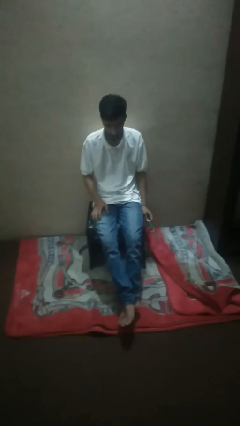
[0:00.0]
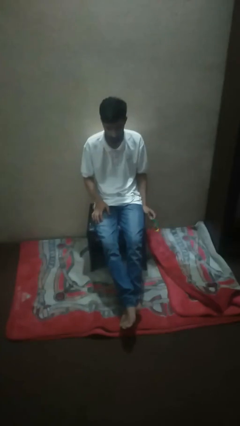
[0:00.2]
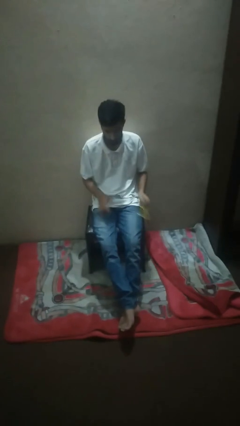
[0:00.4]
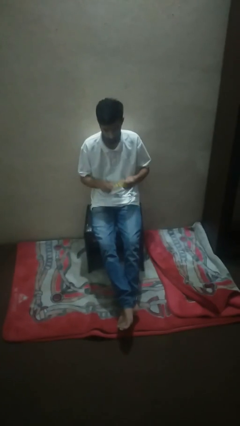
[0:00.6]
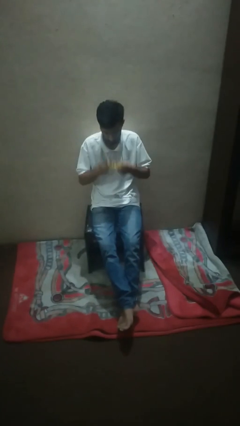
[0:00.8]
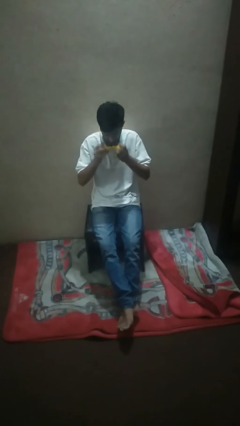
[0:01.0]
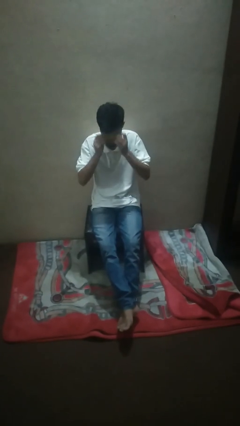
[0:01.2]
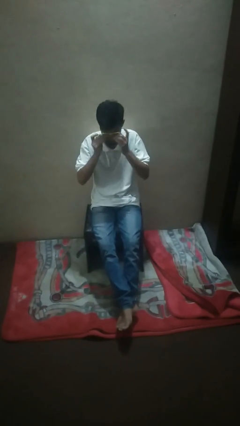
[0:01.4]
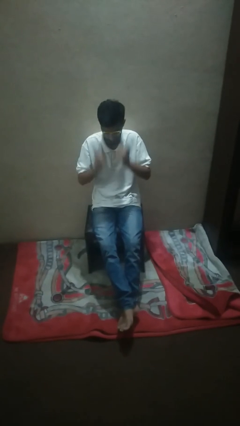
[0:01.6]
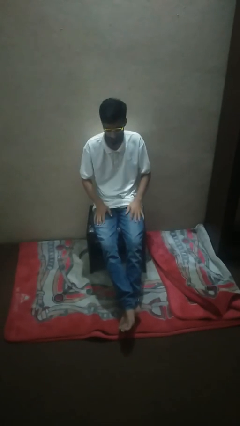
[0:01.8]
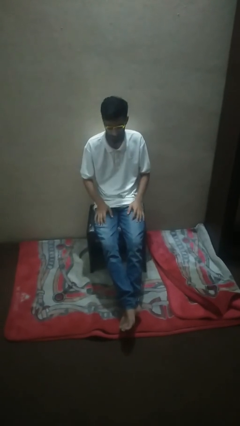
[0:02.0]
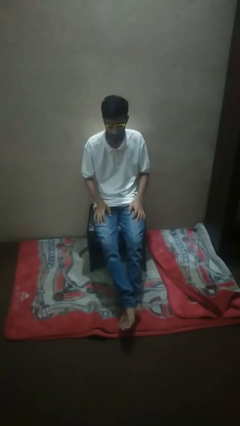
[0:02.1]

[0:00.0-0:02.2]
person puts on sunglasses

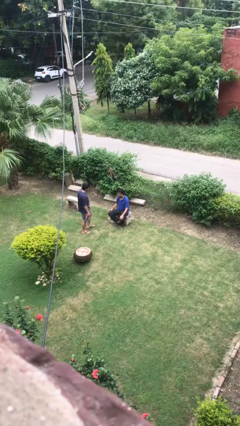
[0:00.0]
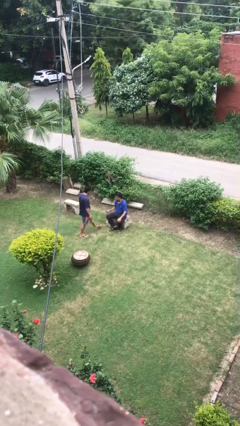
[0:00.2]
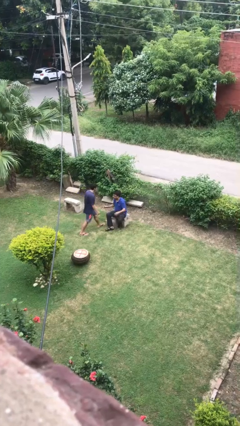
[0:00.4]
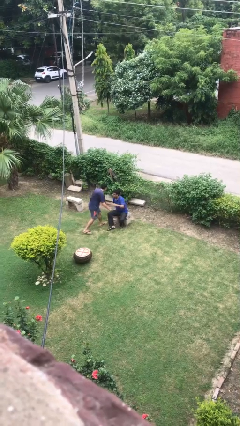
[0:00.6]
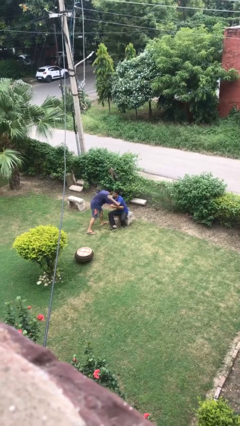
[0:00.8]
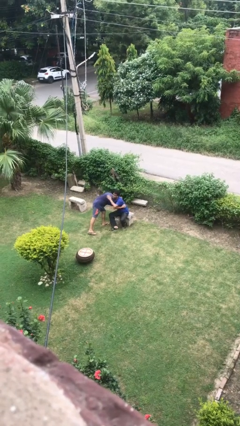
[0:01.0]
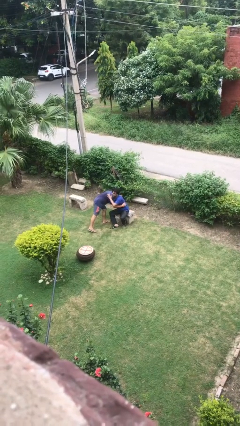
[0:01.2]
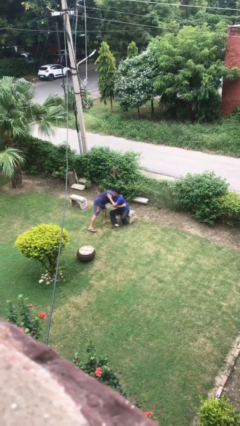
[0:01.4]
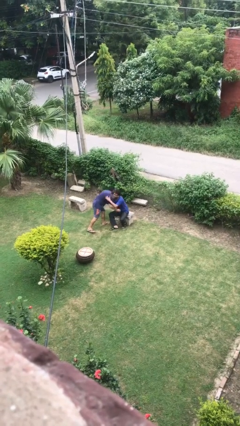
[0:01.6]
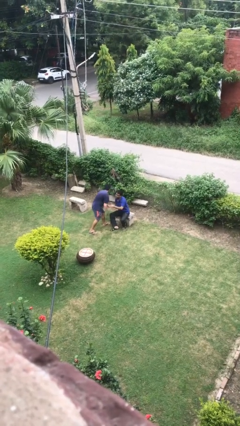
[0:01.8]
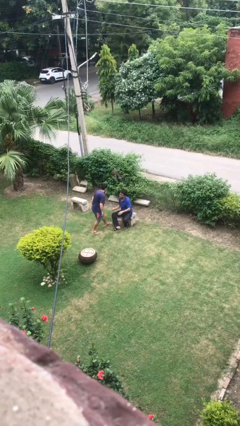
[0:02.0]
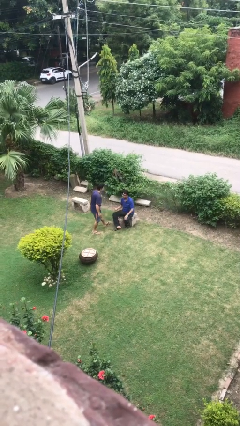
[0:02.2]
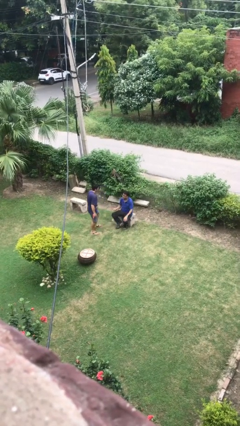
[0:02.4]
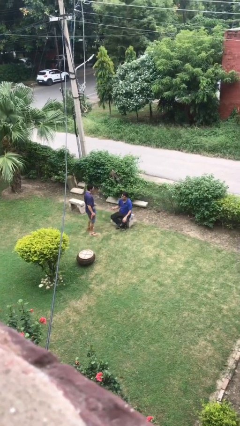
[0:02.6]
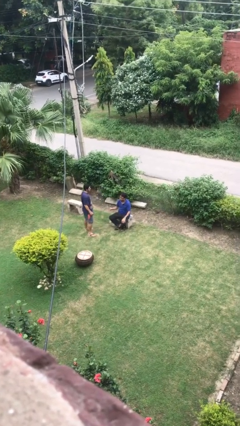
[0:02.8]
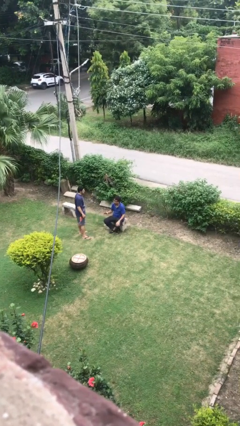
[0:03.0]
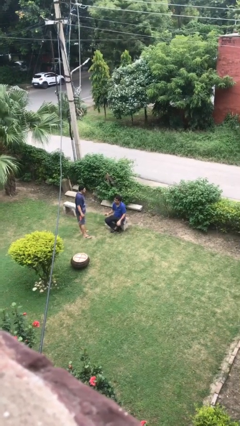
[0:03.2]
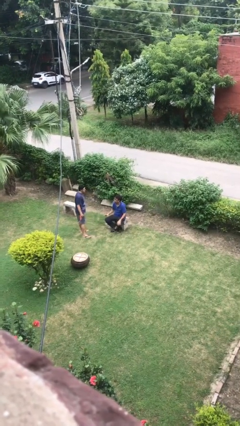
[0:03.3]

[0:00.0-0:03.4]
person embraces person

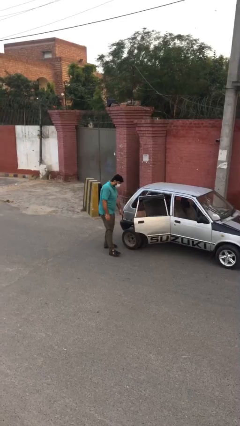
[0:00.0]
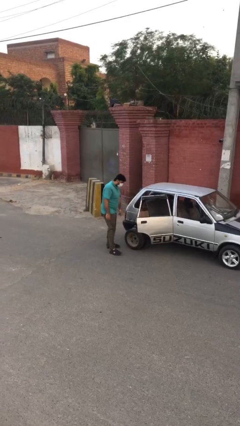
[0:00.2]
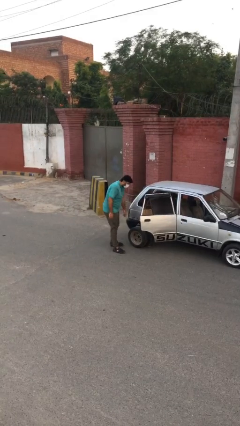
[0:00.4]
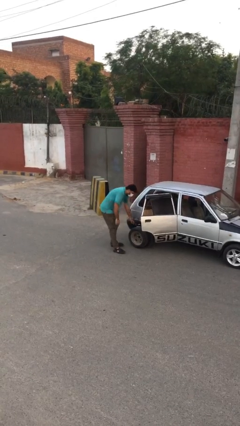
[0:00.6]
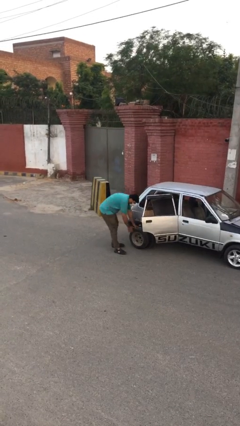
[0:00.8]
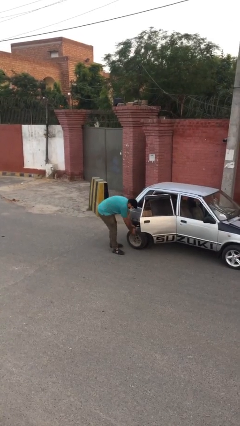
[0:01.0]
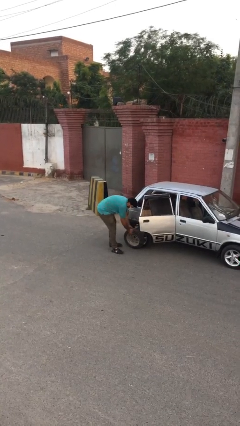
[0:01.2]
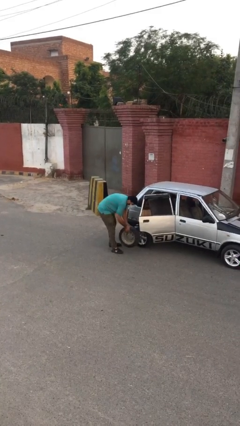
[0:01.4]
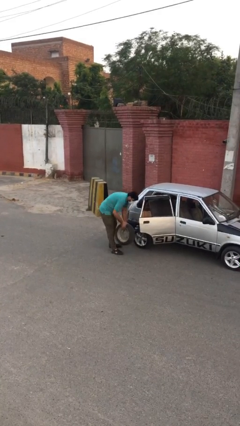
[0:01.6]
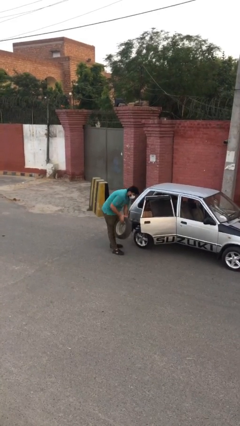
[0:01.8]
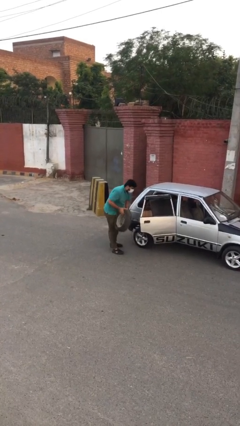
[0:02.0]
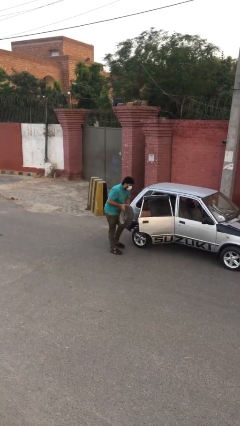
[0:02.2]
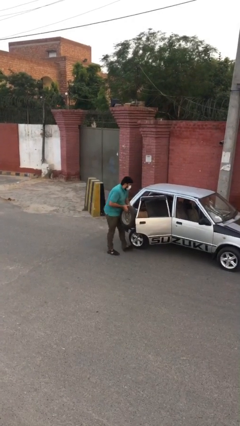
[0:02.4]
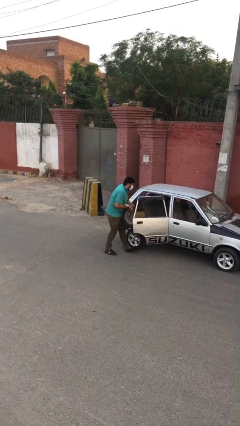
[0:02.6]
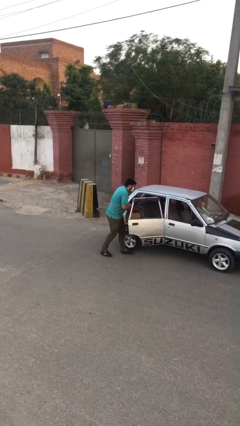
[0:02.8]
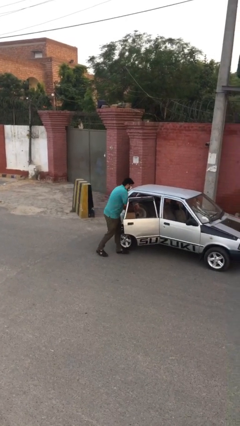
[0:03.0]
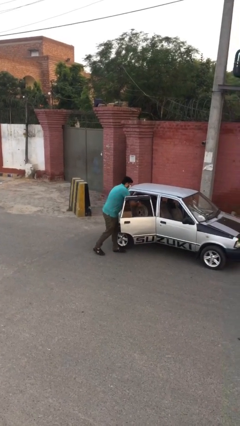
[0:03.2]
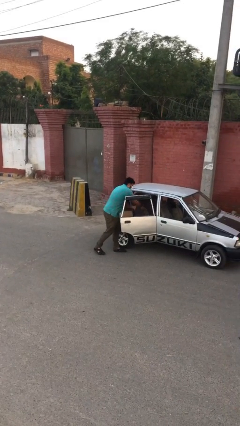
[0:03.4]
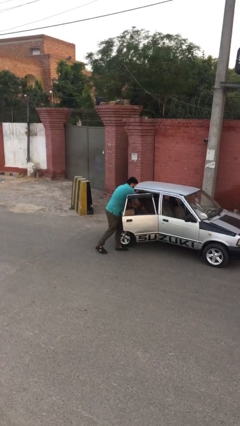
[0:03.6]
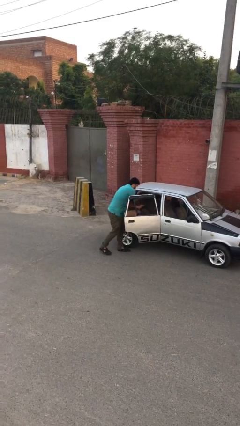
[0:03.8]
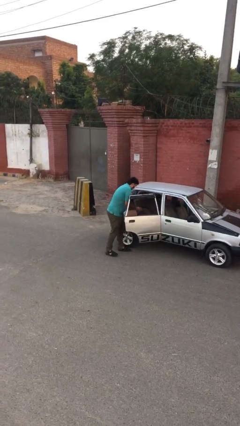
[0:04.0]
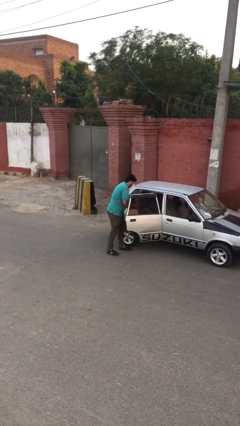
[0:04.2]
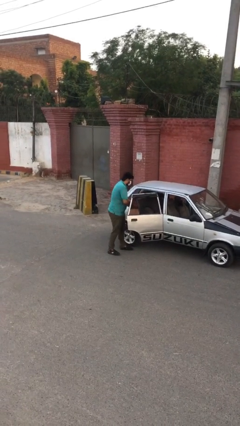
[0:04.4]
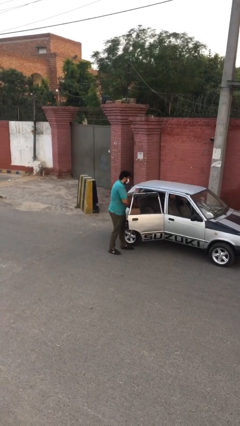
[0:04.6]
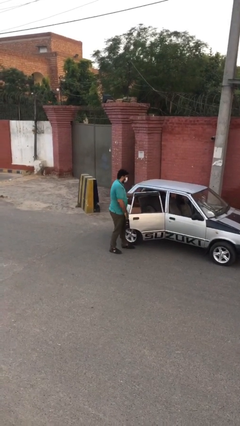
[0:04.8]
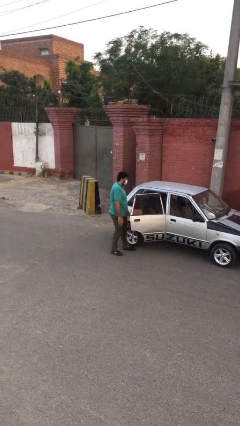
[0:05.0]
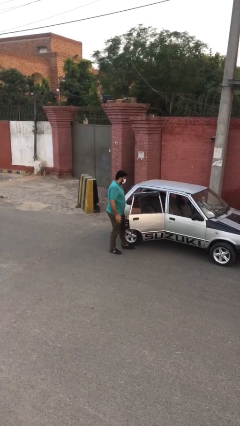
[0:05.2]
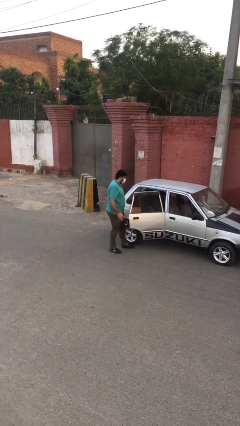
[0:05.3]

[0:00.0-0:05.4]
person loads car

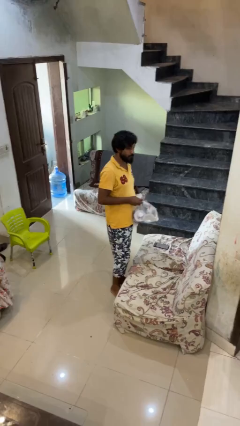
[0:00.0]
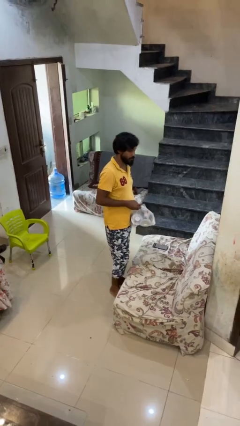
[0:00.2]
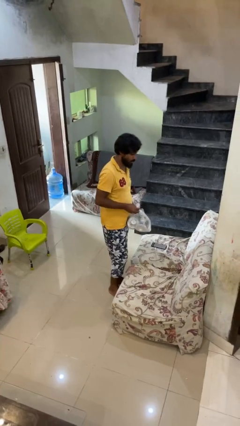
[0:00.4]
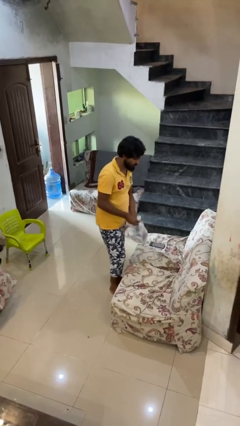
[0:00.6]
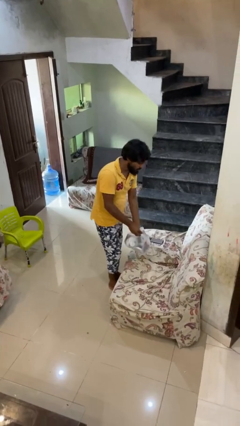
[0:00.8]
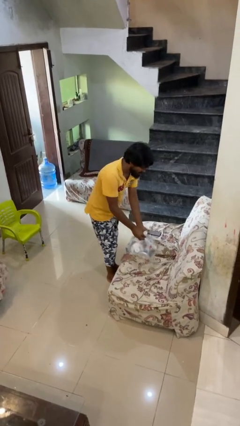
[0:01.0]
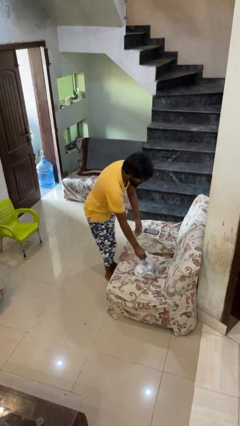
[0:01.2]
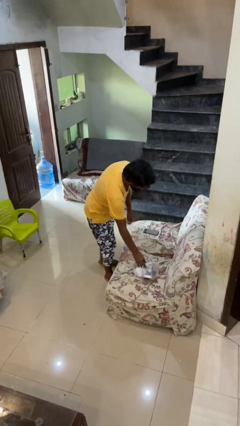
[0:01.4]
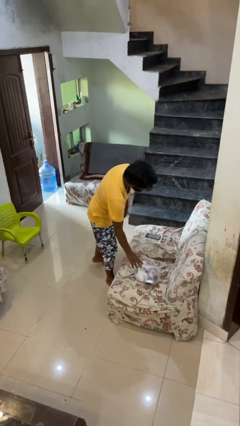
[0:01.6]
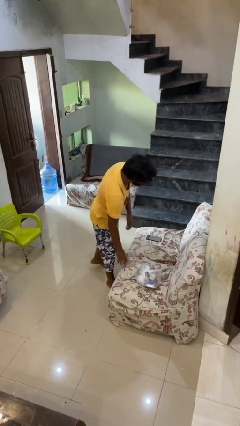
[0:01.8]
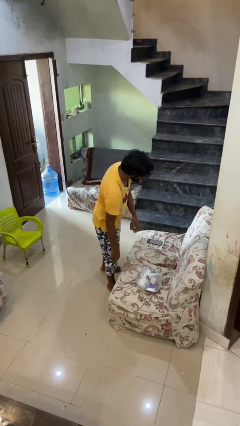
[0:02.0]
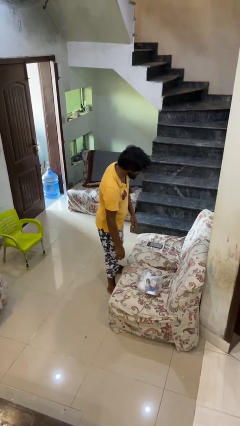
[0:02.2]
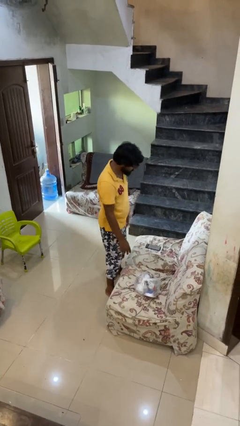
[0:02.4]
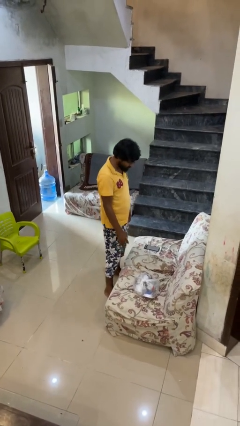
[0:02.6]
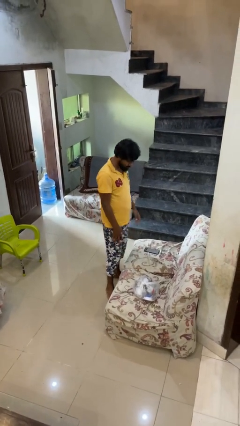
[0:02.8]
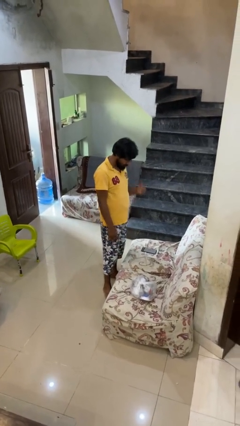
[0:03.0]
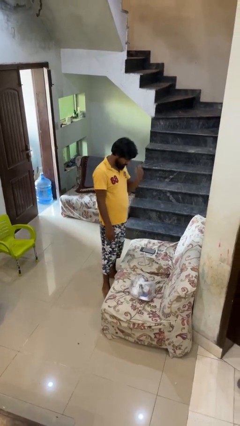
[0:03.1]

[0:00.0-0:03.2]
person puts down object on couch

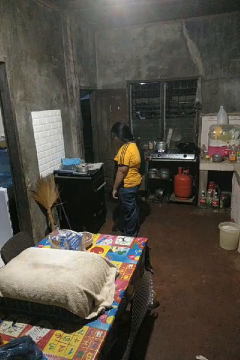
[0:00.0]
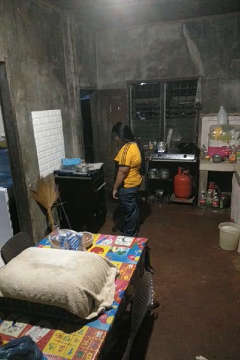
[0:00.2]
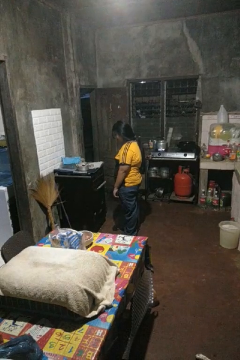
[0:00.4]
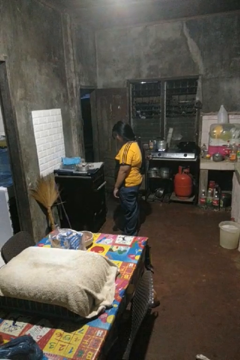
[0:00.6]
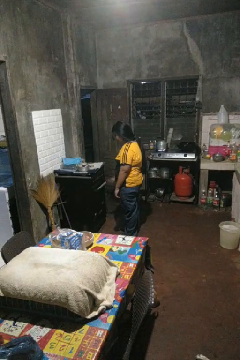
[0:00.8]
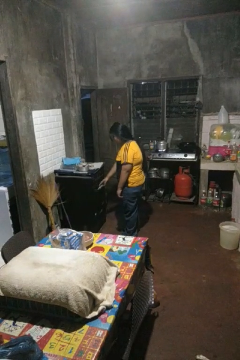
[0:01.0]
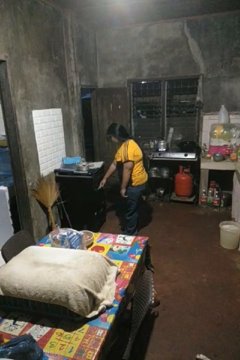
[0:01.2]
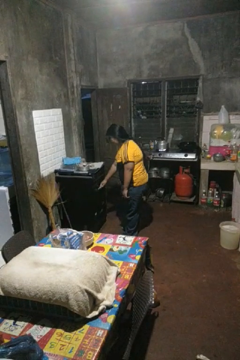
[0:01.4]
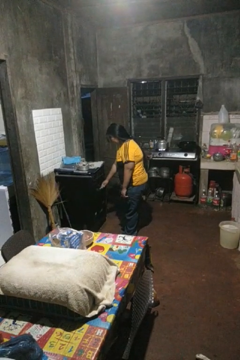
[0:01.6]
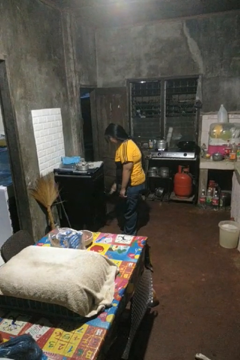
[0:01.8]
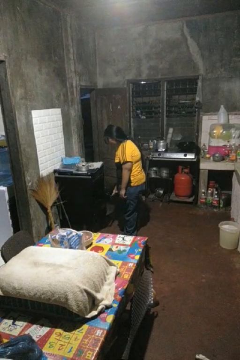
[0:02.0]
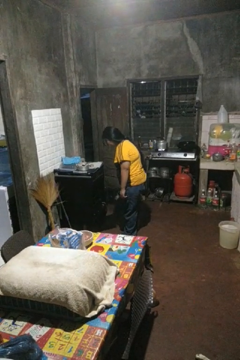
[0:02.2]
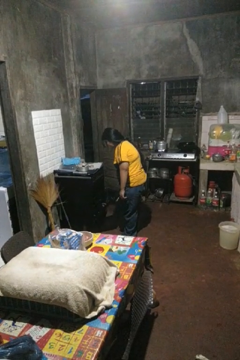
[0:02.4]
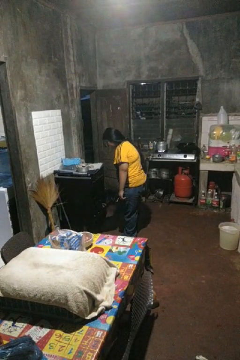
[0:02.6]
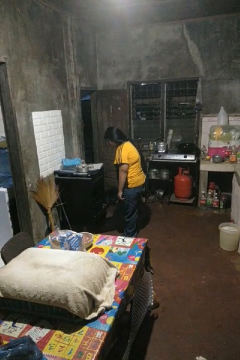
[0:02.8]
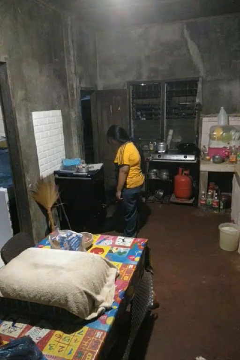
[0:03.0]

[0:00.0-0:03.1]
person opens oven door

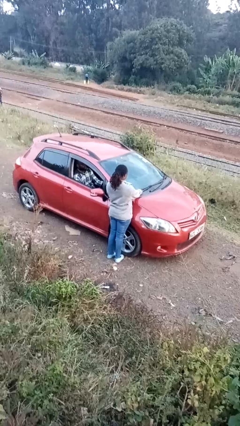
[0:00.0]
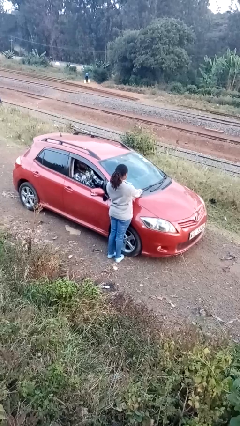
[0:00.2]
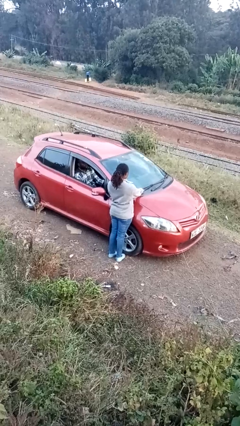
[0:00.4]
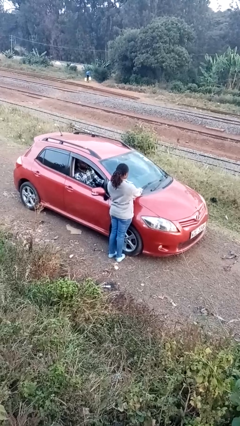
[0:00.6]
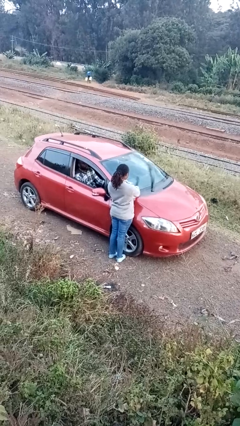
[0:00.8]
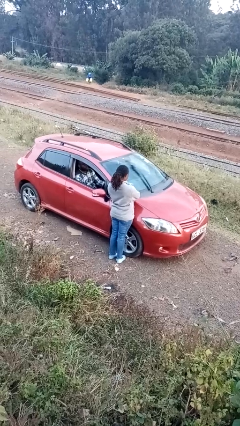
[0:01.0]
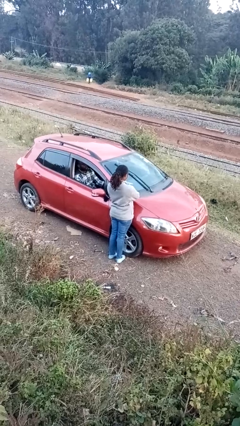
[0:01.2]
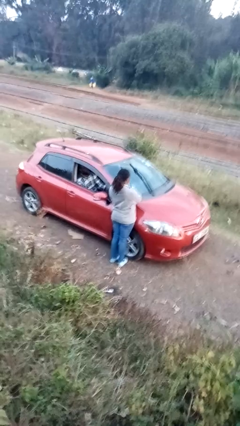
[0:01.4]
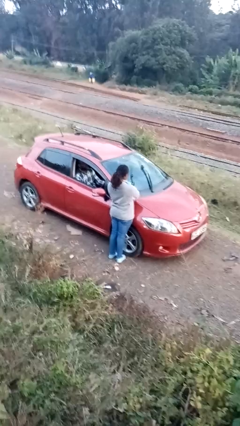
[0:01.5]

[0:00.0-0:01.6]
person flips up car wipers
